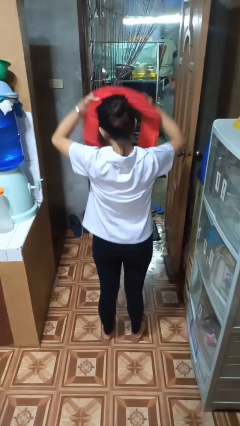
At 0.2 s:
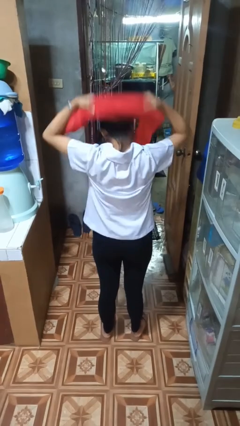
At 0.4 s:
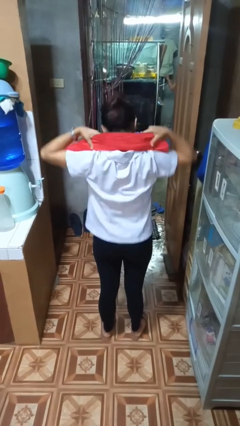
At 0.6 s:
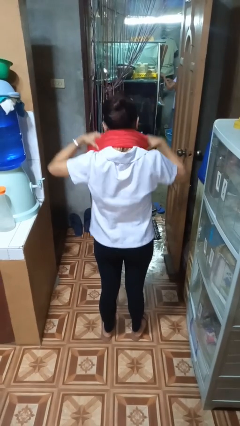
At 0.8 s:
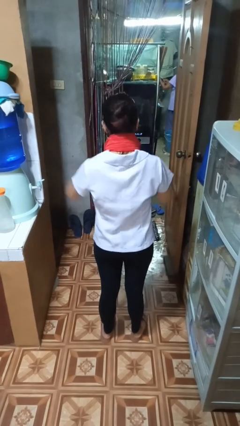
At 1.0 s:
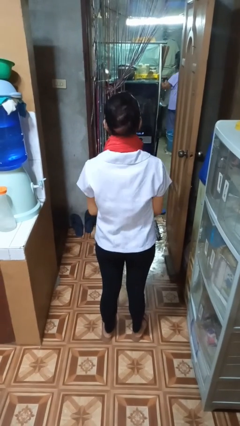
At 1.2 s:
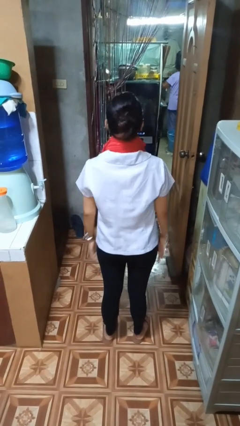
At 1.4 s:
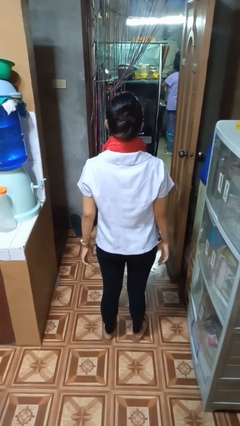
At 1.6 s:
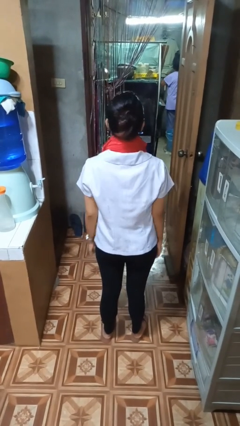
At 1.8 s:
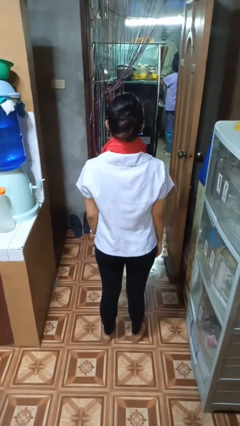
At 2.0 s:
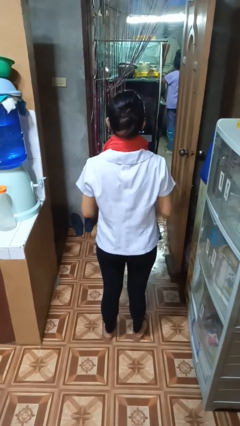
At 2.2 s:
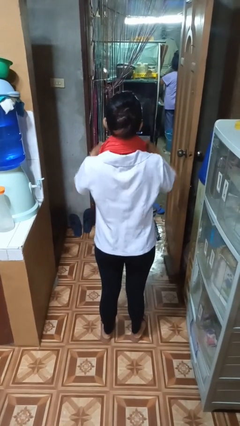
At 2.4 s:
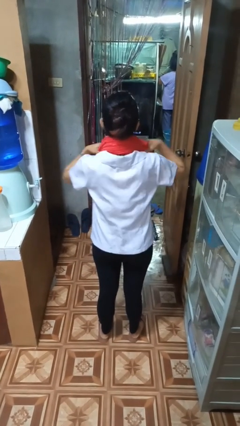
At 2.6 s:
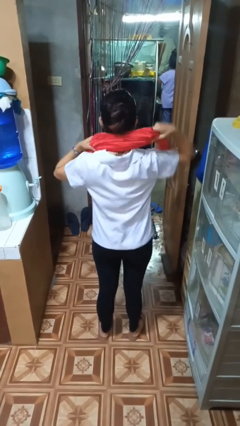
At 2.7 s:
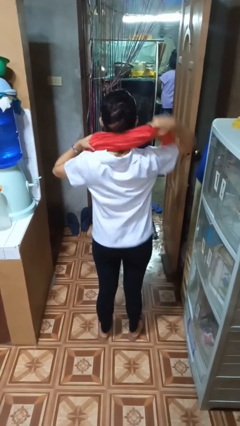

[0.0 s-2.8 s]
person puts on scarf

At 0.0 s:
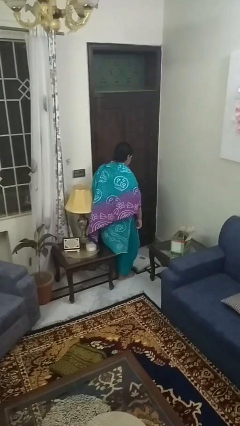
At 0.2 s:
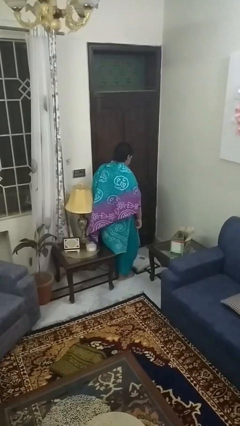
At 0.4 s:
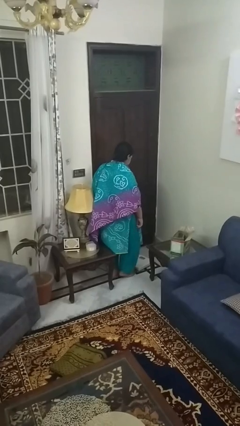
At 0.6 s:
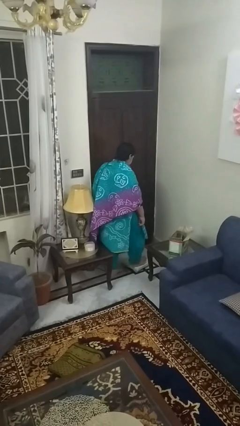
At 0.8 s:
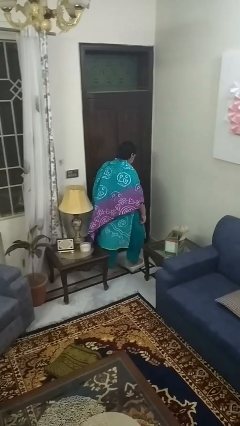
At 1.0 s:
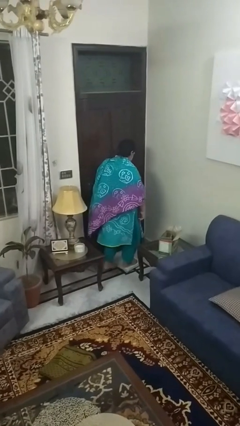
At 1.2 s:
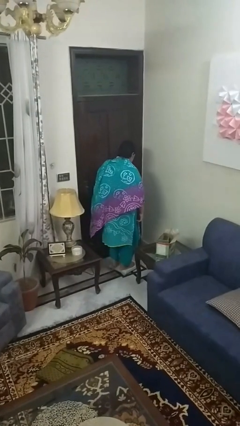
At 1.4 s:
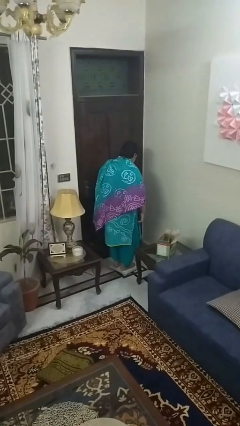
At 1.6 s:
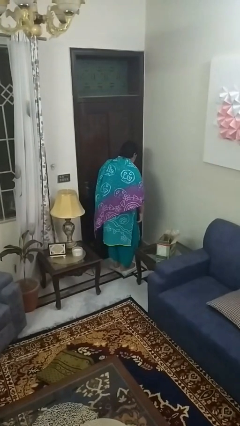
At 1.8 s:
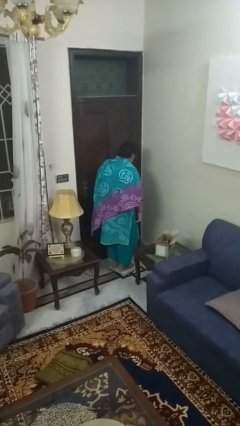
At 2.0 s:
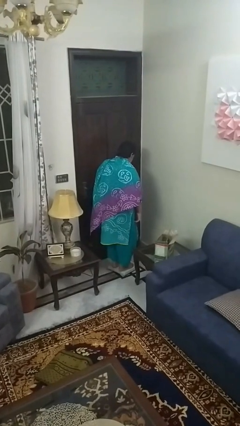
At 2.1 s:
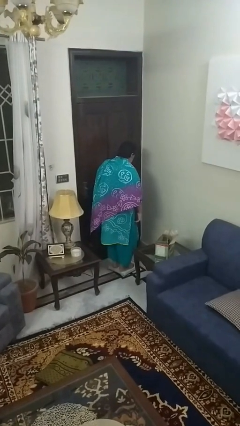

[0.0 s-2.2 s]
person uses bodyweight scale

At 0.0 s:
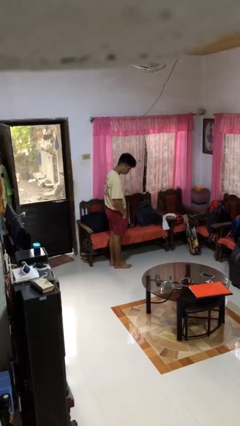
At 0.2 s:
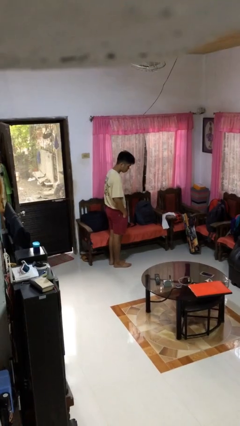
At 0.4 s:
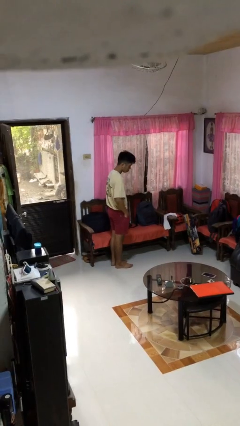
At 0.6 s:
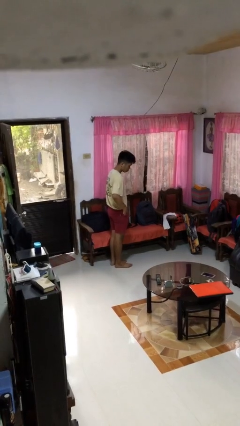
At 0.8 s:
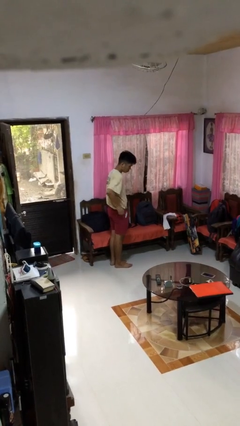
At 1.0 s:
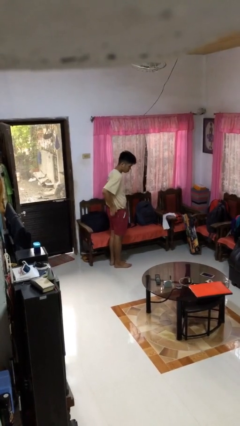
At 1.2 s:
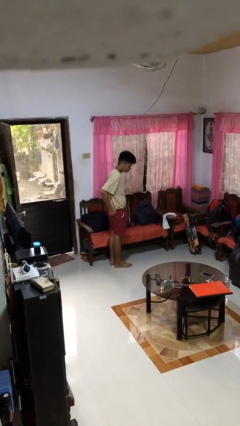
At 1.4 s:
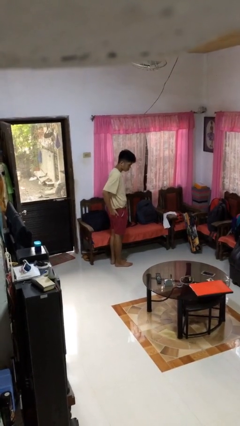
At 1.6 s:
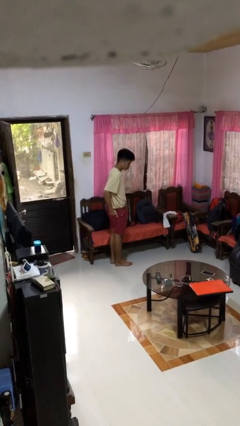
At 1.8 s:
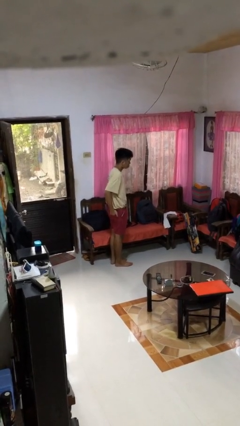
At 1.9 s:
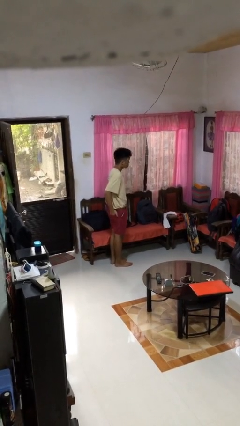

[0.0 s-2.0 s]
person puts hands in back pockets

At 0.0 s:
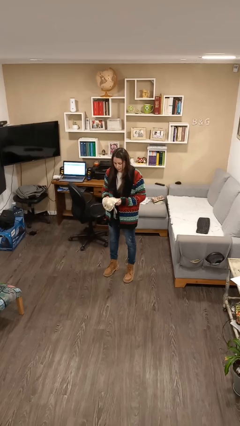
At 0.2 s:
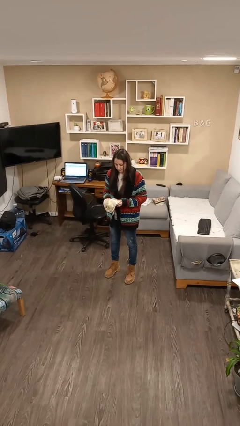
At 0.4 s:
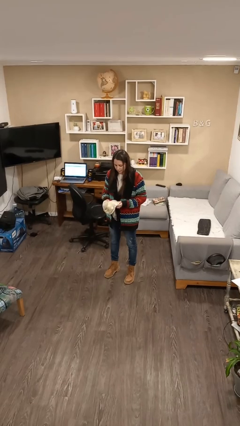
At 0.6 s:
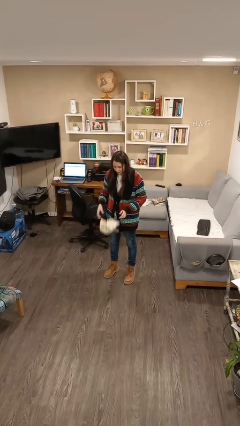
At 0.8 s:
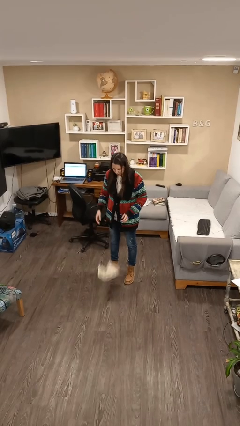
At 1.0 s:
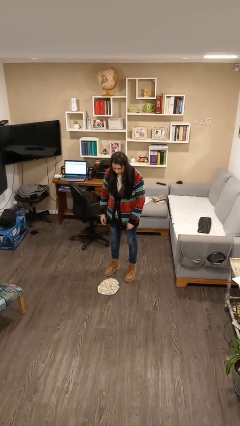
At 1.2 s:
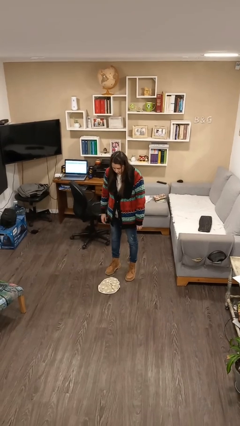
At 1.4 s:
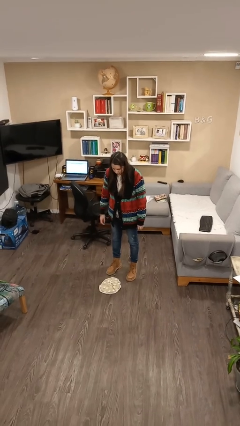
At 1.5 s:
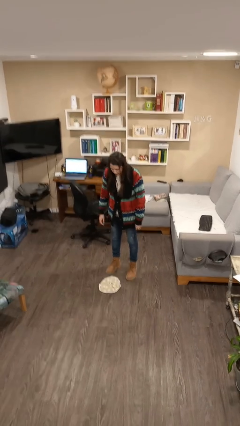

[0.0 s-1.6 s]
person drops object

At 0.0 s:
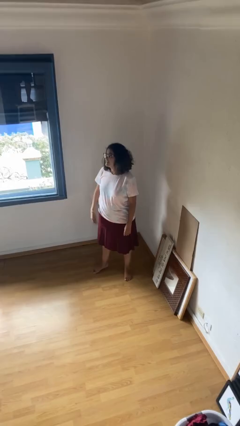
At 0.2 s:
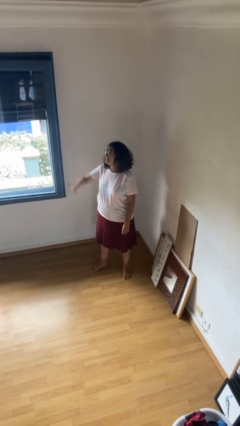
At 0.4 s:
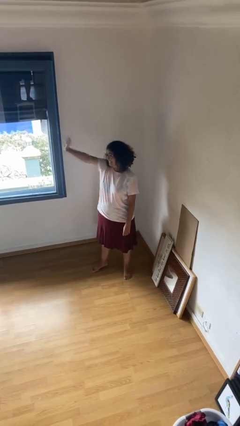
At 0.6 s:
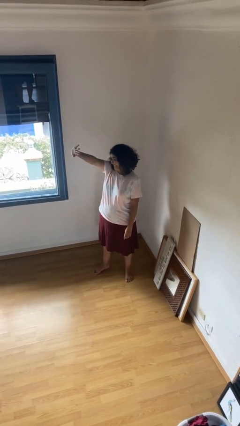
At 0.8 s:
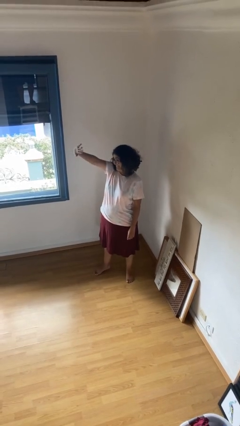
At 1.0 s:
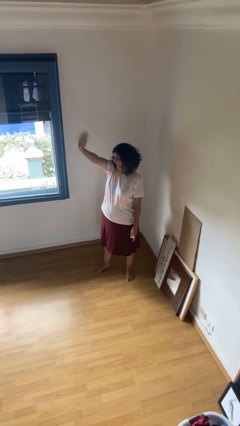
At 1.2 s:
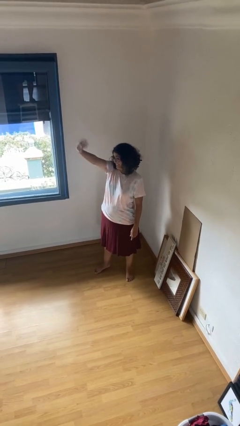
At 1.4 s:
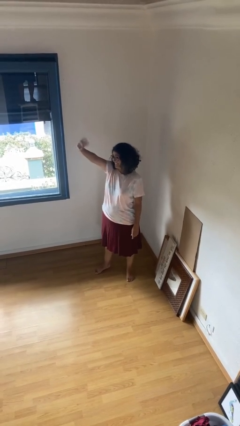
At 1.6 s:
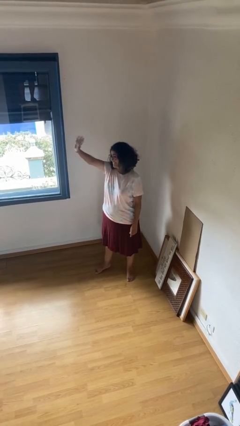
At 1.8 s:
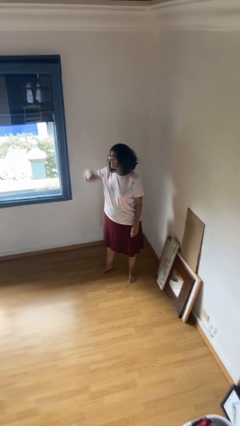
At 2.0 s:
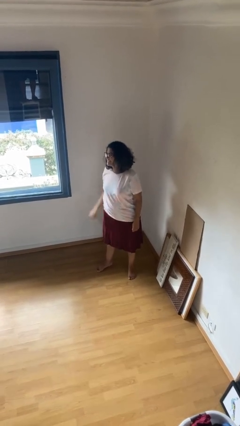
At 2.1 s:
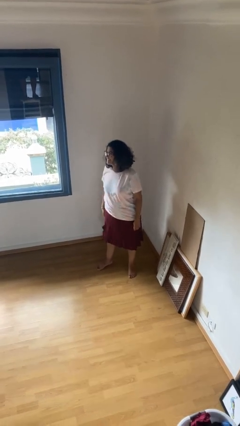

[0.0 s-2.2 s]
person waves at person

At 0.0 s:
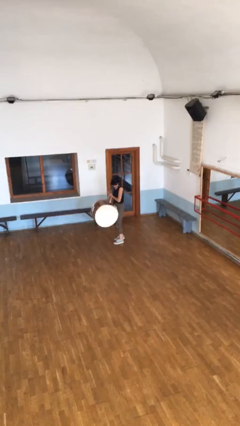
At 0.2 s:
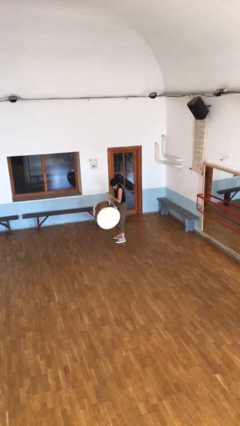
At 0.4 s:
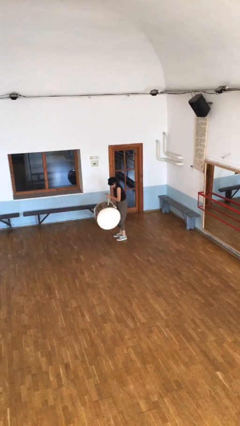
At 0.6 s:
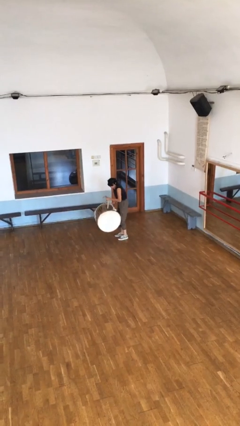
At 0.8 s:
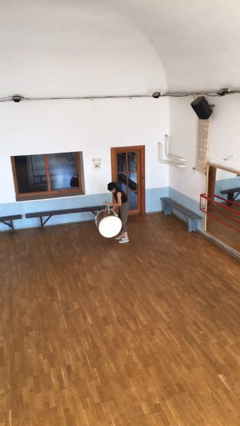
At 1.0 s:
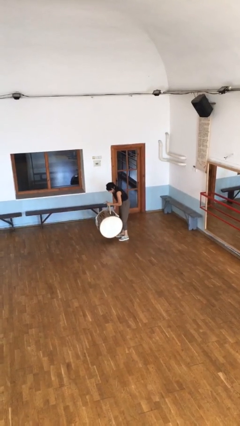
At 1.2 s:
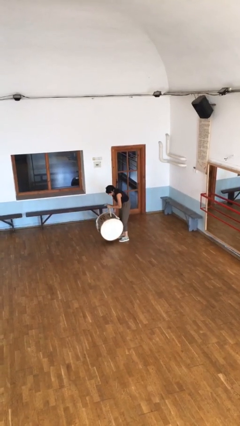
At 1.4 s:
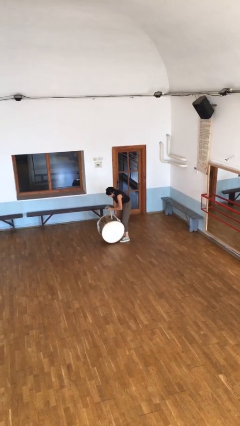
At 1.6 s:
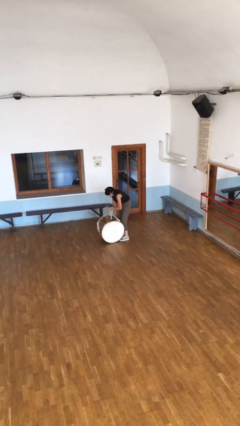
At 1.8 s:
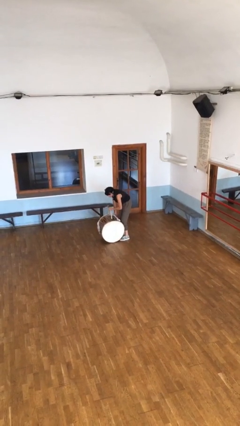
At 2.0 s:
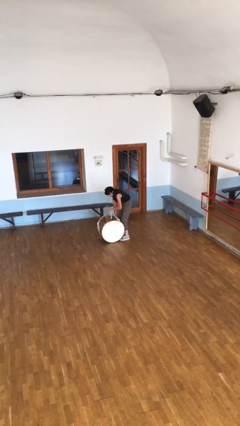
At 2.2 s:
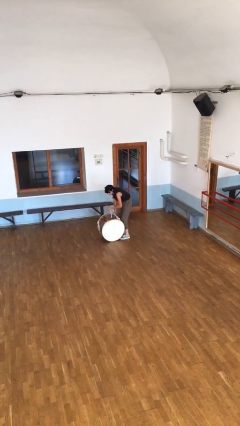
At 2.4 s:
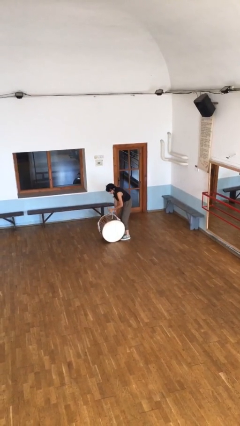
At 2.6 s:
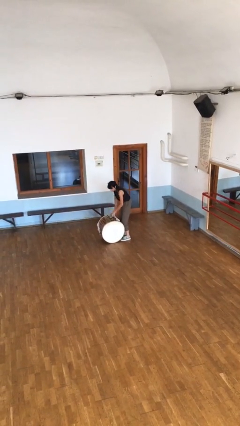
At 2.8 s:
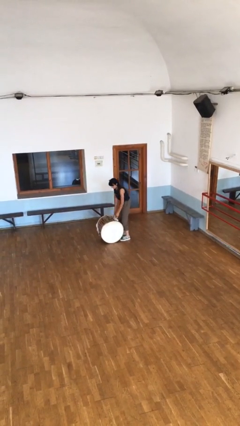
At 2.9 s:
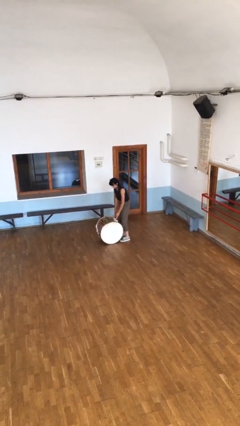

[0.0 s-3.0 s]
person puts down object on floor

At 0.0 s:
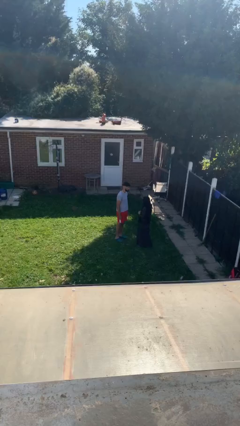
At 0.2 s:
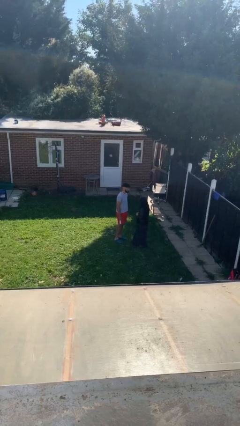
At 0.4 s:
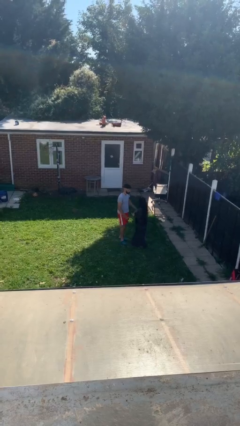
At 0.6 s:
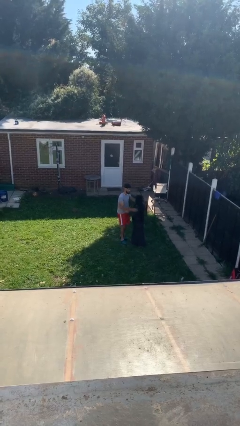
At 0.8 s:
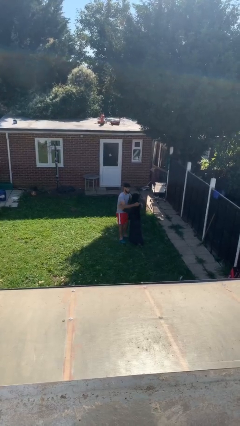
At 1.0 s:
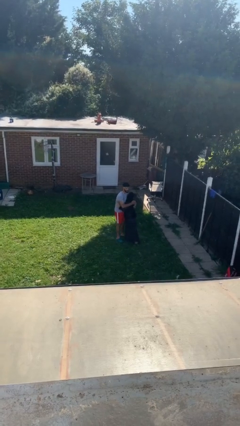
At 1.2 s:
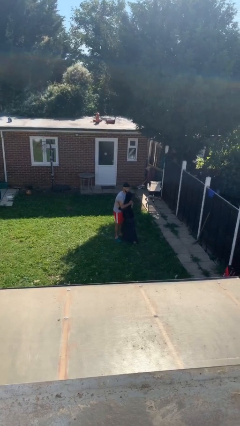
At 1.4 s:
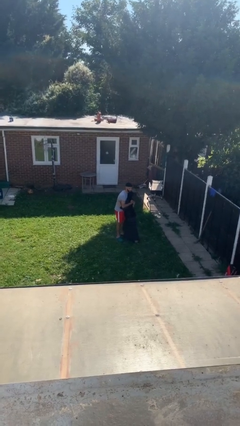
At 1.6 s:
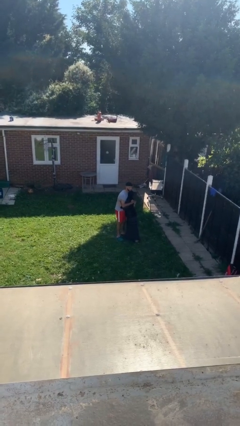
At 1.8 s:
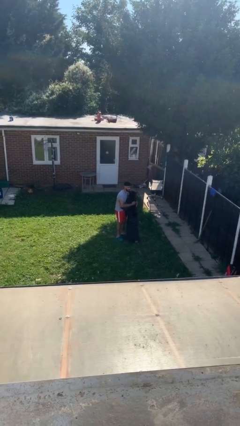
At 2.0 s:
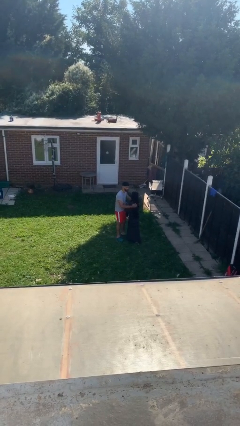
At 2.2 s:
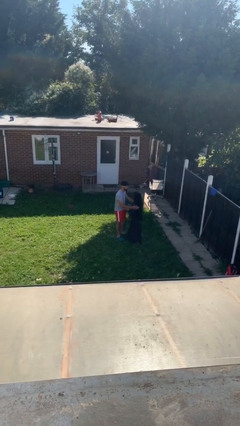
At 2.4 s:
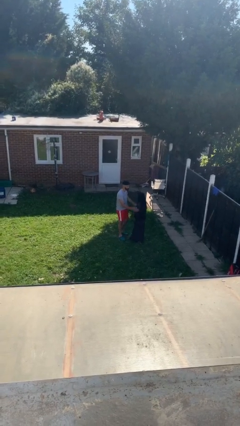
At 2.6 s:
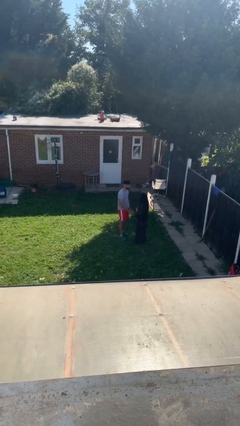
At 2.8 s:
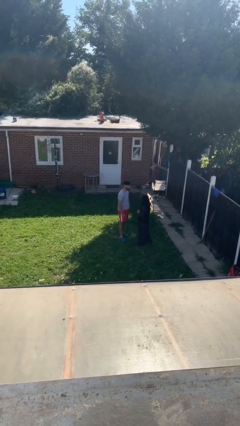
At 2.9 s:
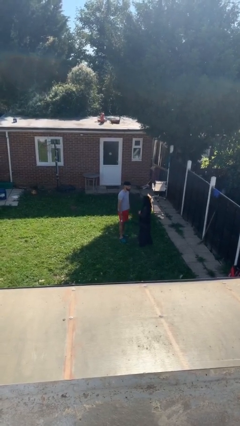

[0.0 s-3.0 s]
person embraces person

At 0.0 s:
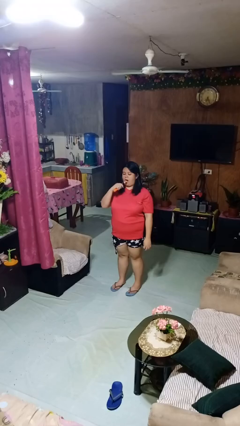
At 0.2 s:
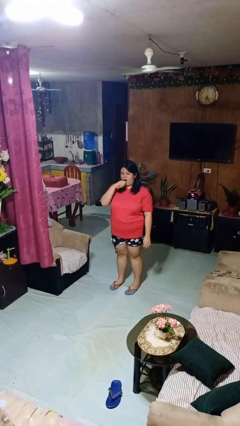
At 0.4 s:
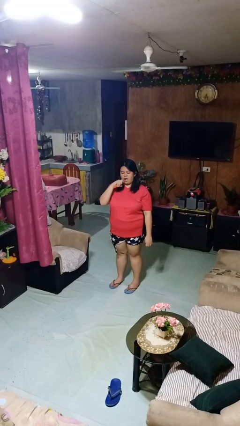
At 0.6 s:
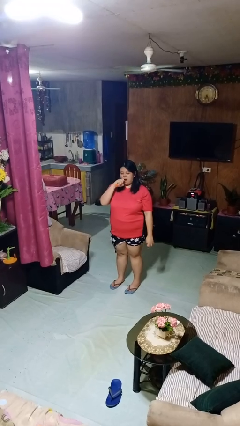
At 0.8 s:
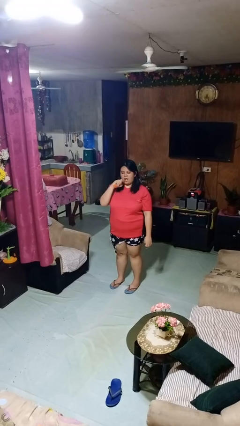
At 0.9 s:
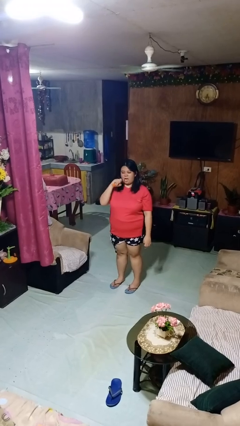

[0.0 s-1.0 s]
person brushes teeth
